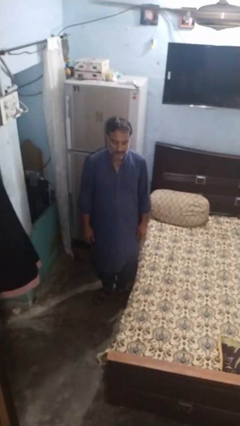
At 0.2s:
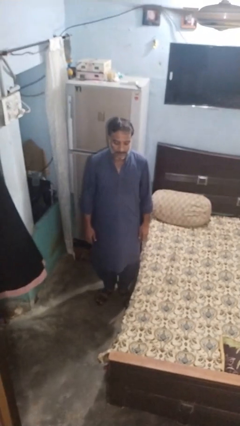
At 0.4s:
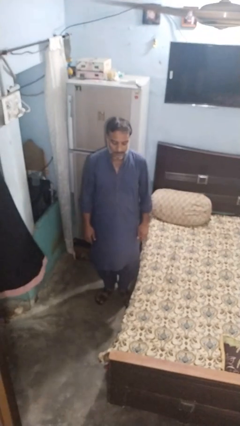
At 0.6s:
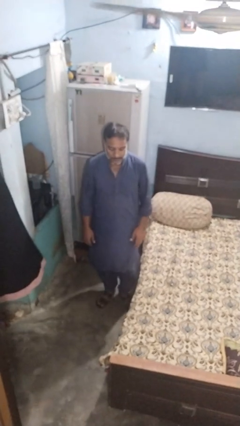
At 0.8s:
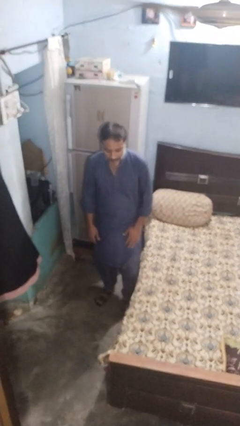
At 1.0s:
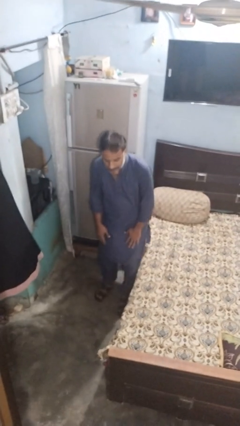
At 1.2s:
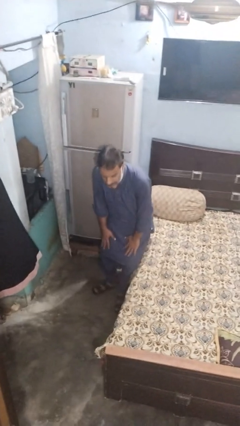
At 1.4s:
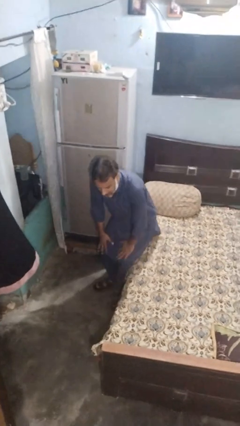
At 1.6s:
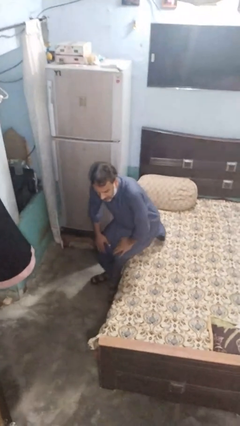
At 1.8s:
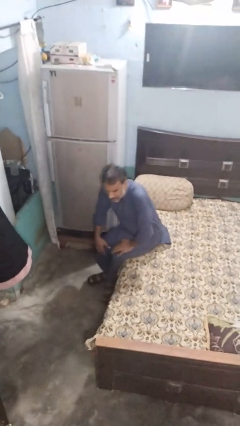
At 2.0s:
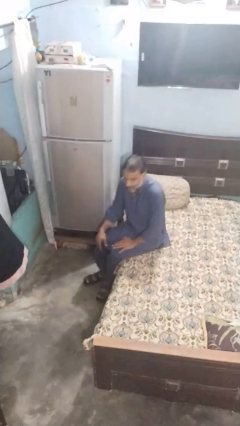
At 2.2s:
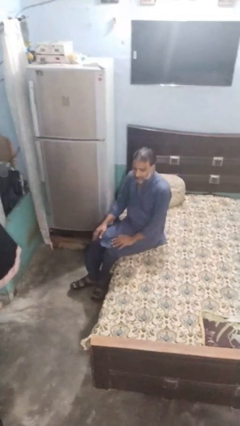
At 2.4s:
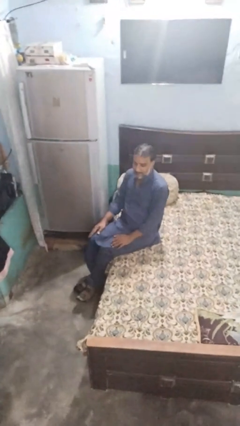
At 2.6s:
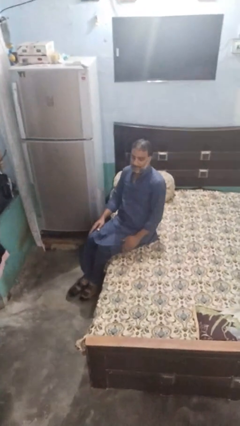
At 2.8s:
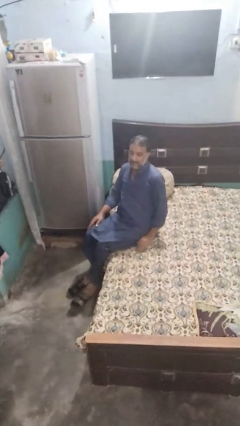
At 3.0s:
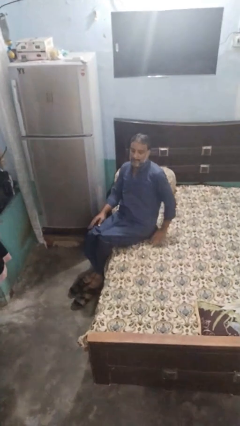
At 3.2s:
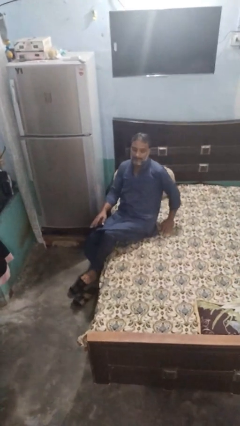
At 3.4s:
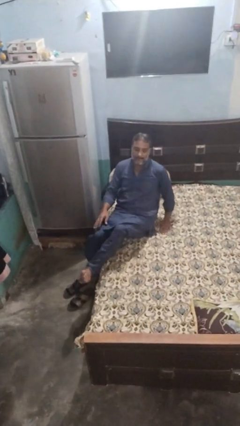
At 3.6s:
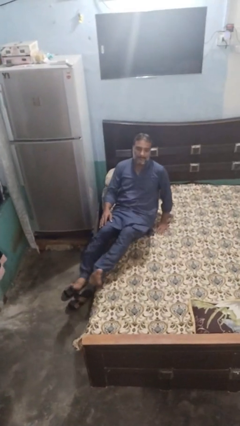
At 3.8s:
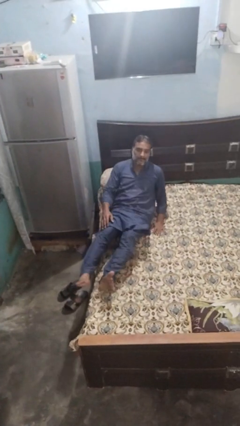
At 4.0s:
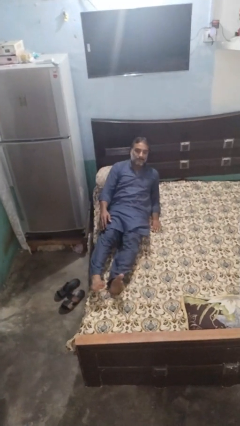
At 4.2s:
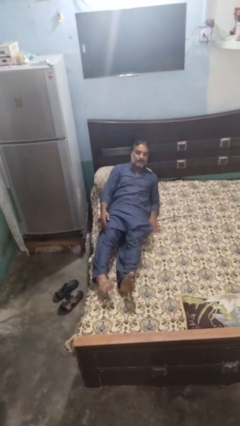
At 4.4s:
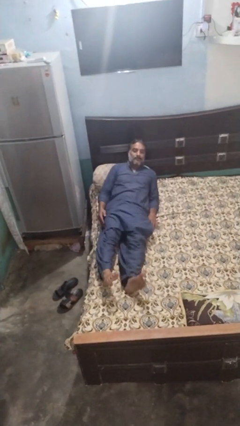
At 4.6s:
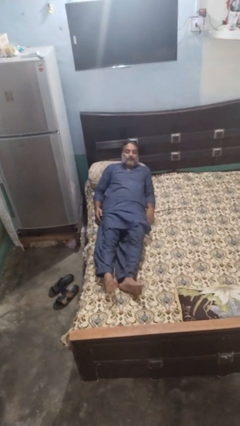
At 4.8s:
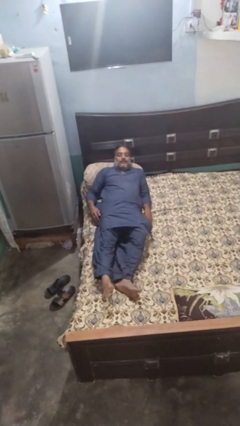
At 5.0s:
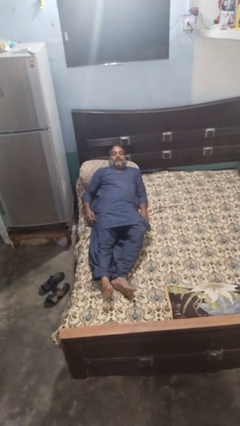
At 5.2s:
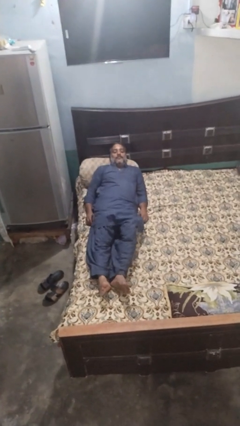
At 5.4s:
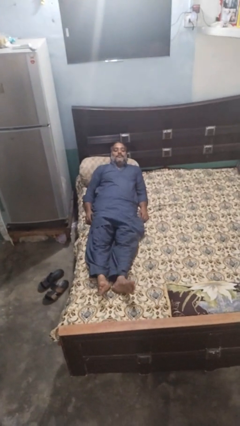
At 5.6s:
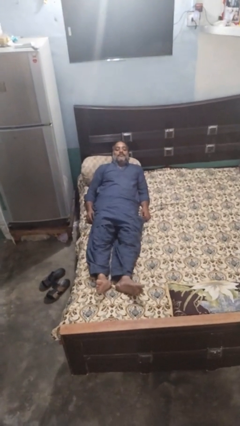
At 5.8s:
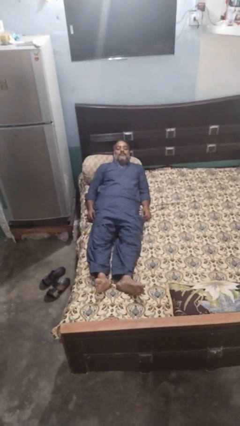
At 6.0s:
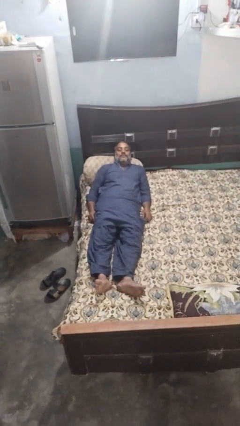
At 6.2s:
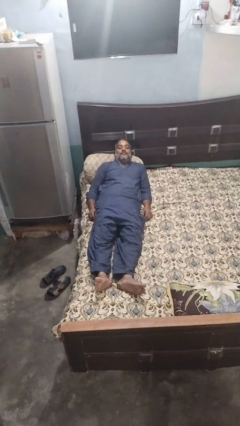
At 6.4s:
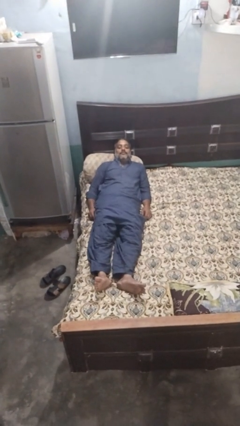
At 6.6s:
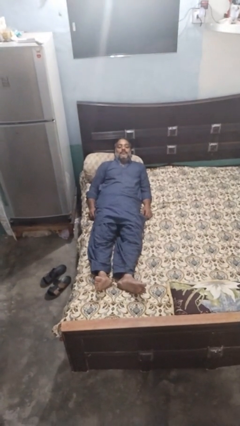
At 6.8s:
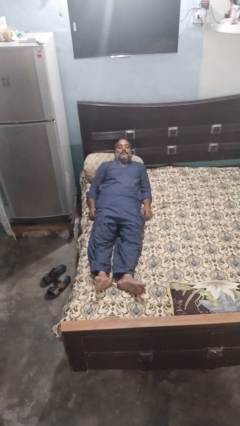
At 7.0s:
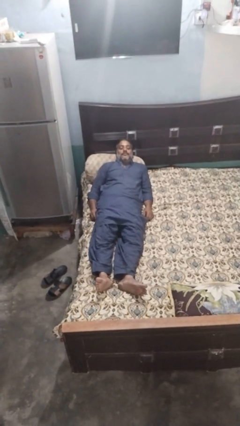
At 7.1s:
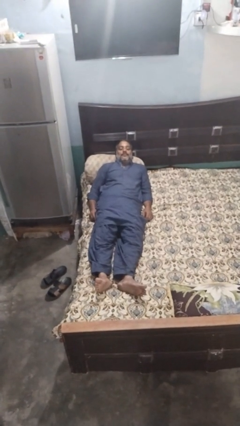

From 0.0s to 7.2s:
person lies down on bed

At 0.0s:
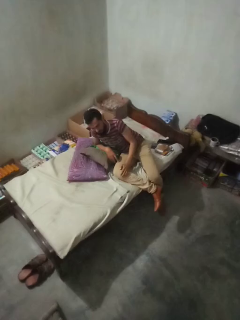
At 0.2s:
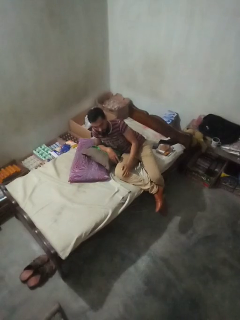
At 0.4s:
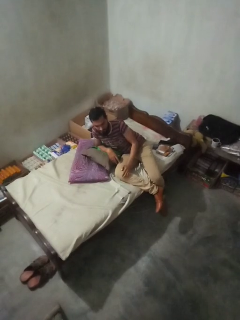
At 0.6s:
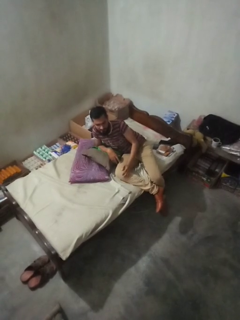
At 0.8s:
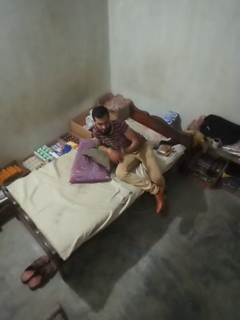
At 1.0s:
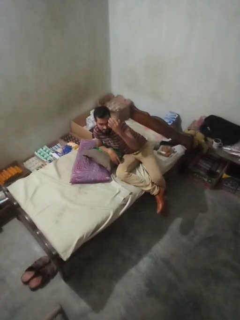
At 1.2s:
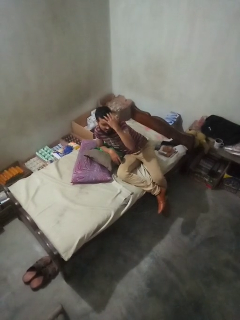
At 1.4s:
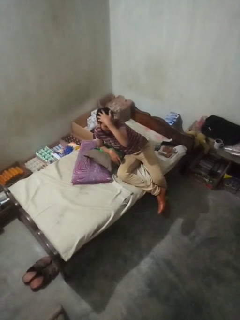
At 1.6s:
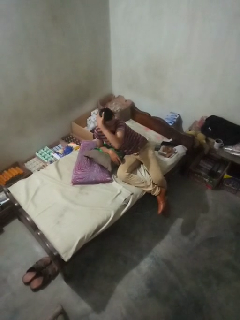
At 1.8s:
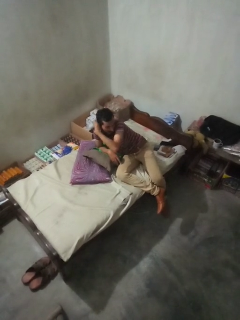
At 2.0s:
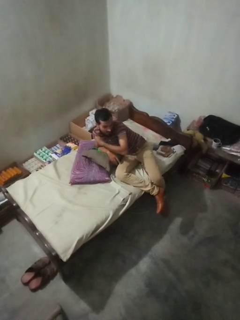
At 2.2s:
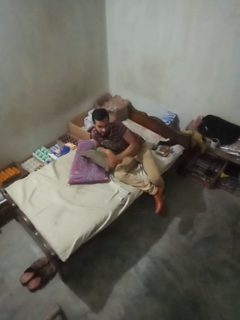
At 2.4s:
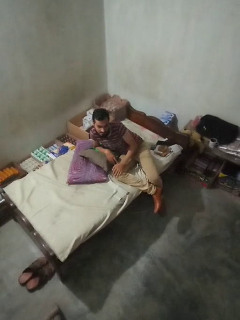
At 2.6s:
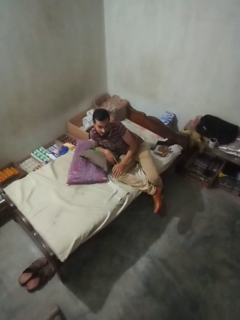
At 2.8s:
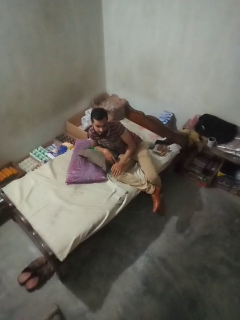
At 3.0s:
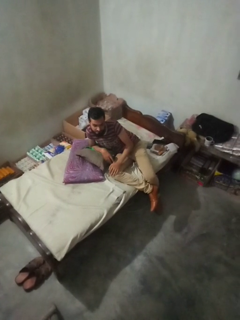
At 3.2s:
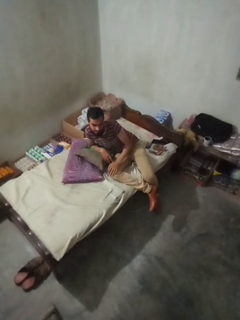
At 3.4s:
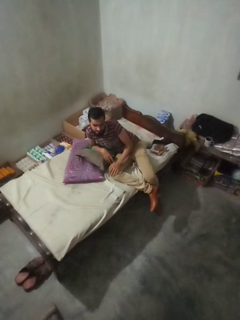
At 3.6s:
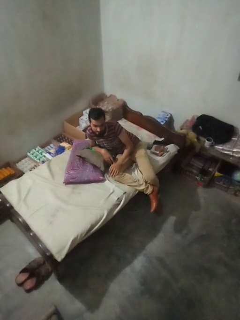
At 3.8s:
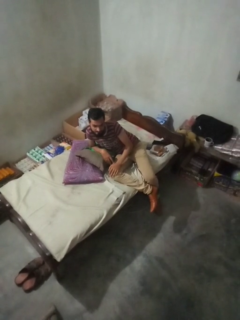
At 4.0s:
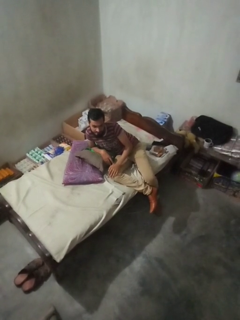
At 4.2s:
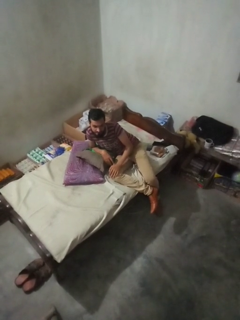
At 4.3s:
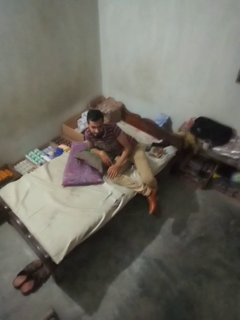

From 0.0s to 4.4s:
person strokes hair

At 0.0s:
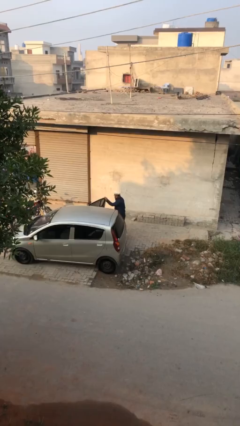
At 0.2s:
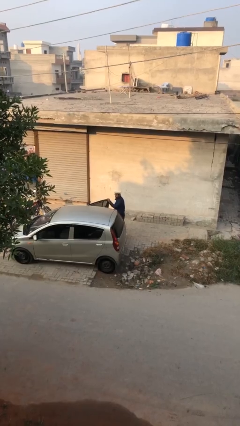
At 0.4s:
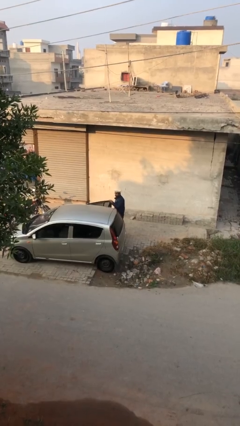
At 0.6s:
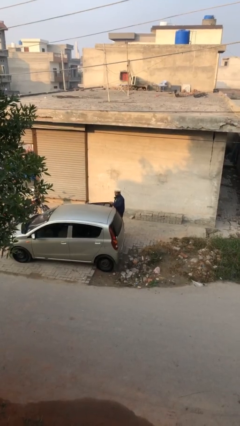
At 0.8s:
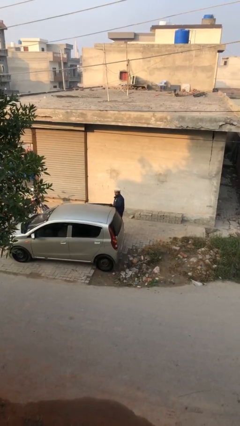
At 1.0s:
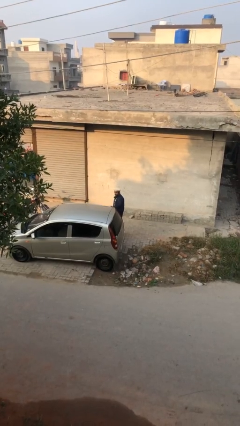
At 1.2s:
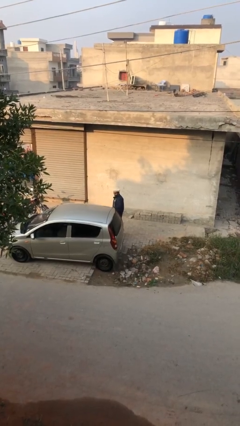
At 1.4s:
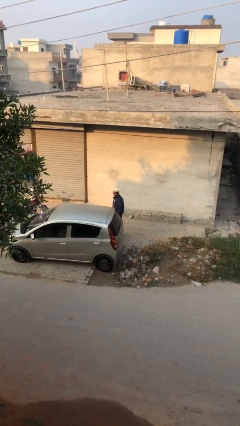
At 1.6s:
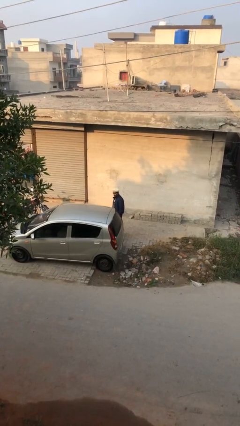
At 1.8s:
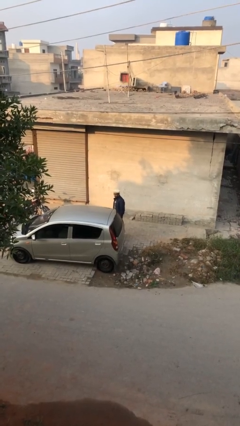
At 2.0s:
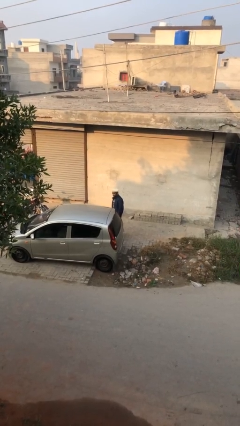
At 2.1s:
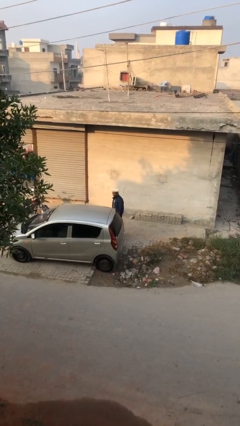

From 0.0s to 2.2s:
person closes car door

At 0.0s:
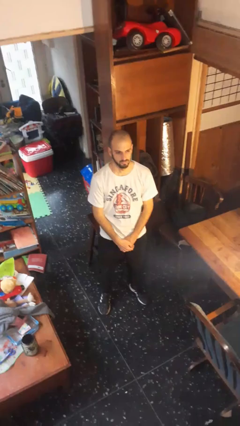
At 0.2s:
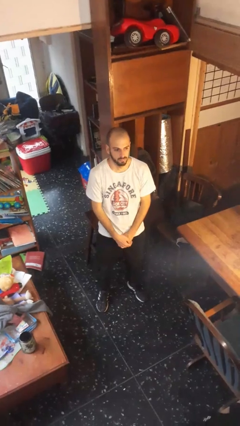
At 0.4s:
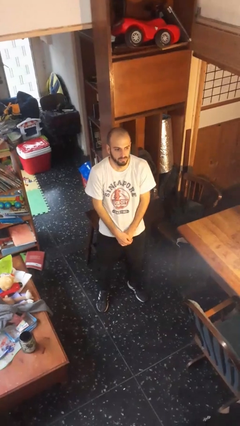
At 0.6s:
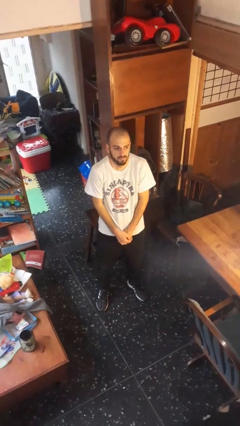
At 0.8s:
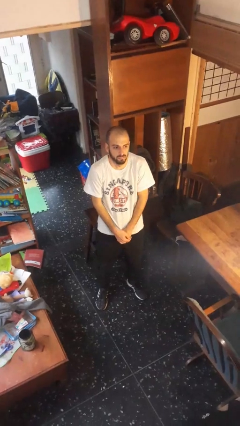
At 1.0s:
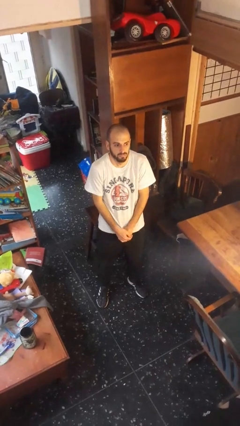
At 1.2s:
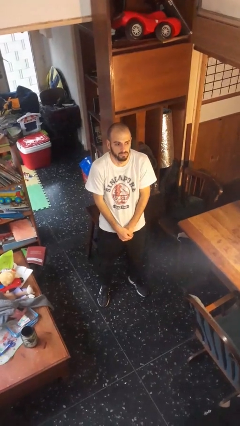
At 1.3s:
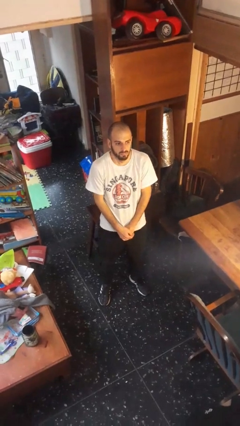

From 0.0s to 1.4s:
person shrugs

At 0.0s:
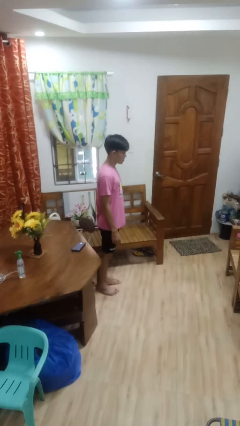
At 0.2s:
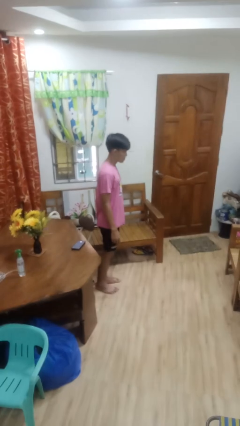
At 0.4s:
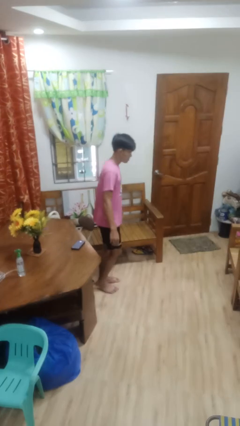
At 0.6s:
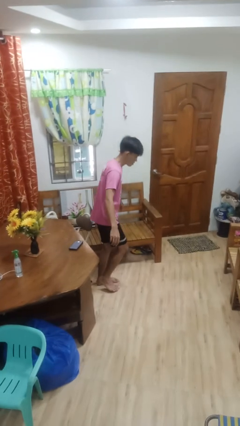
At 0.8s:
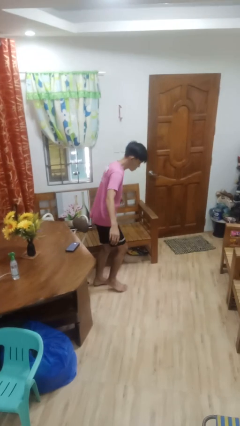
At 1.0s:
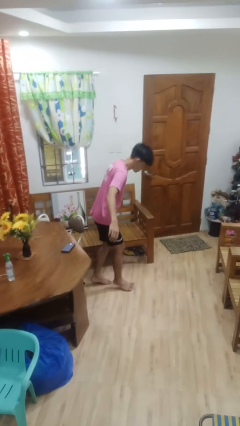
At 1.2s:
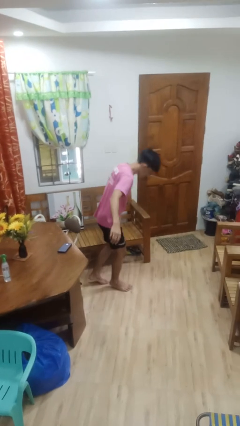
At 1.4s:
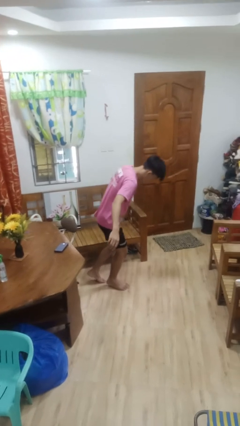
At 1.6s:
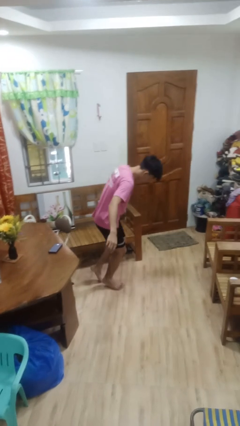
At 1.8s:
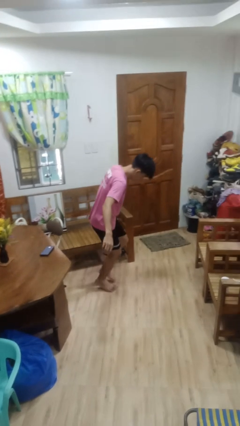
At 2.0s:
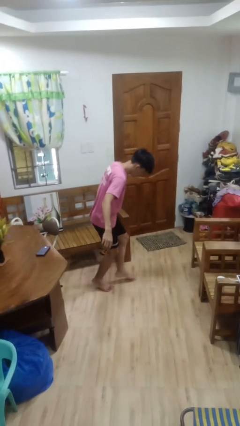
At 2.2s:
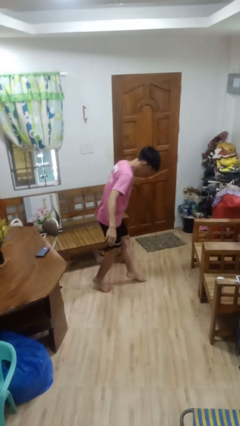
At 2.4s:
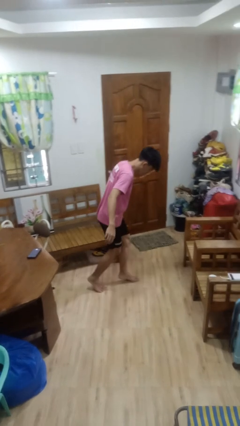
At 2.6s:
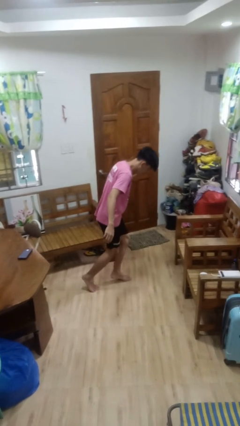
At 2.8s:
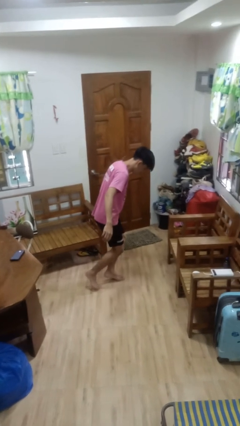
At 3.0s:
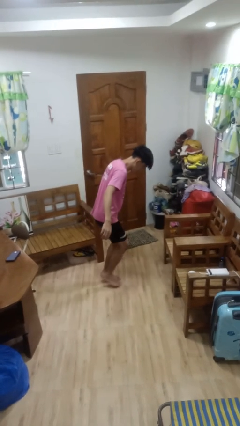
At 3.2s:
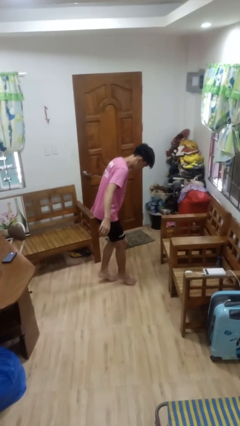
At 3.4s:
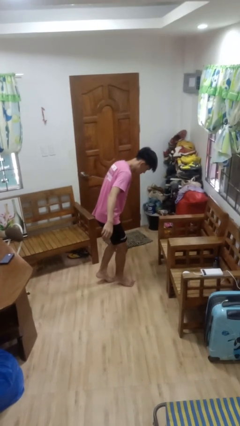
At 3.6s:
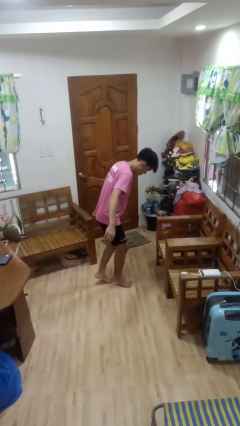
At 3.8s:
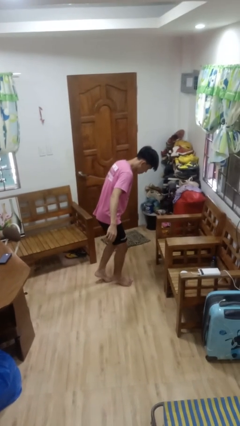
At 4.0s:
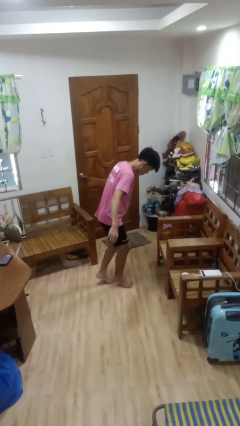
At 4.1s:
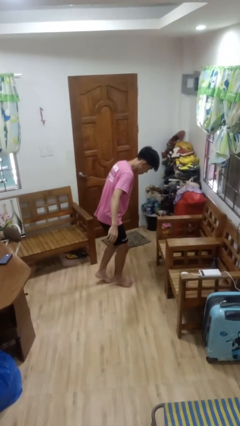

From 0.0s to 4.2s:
person walks tiptoe
